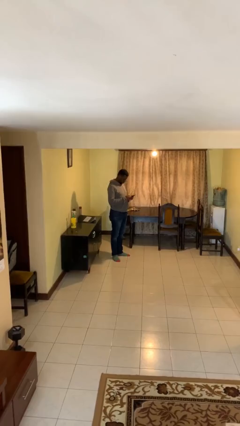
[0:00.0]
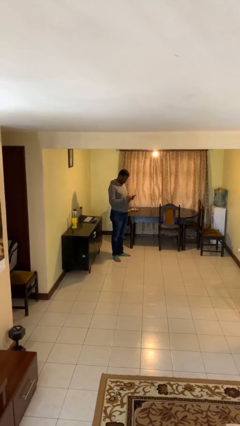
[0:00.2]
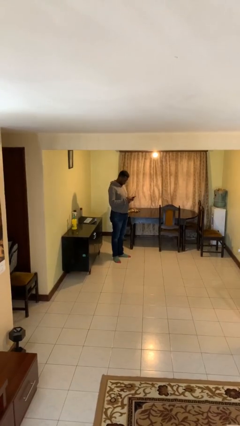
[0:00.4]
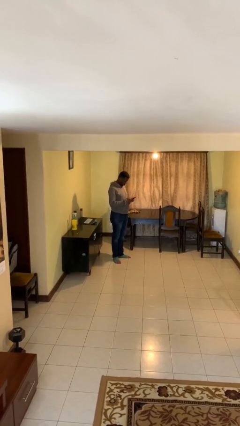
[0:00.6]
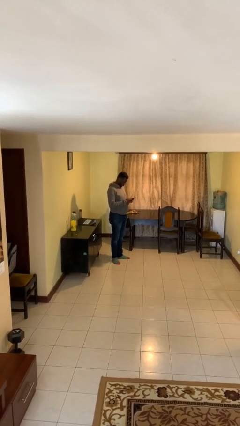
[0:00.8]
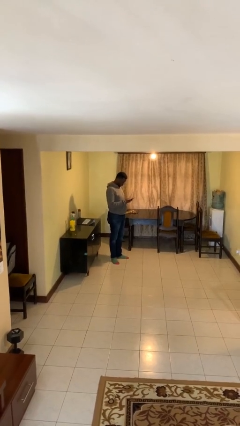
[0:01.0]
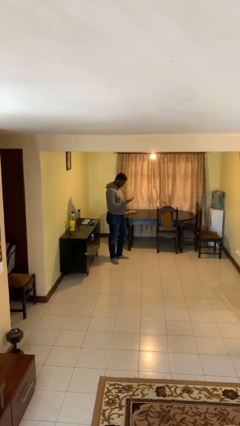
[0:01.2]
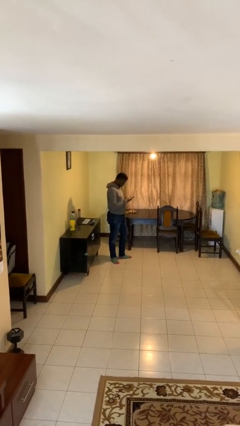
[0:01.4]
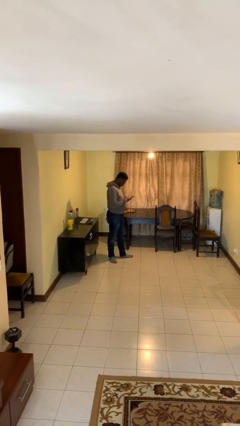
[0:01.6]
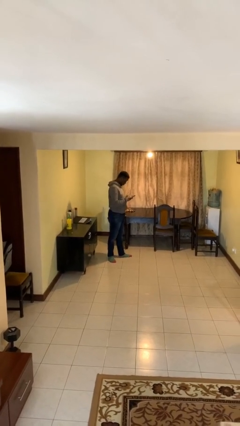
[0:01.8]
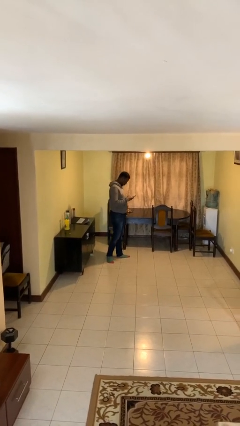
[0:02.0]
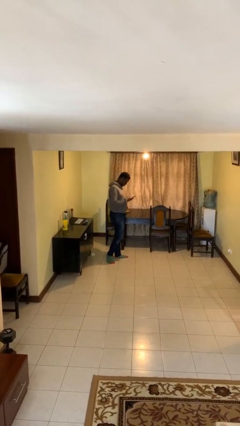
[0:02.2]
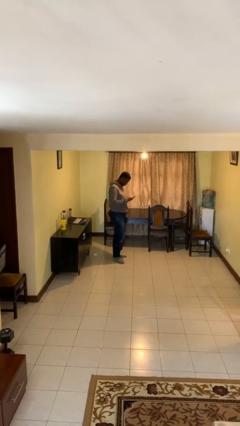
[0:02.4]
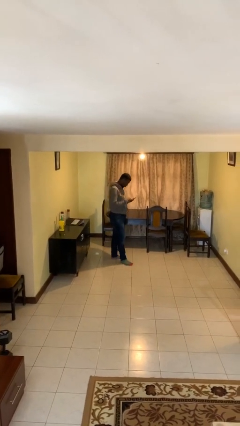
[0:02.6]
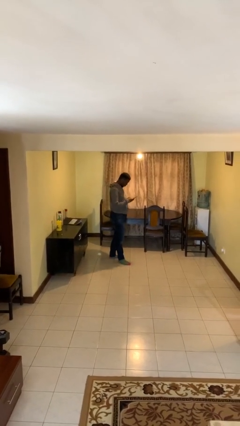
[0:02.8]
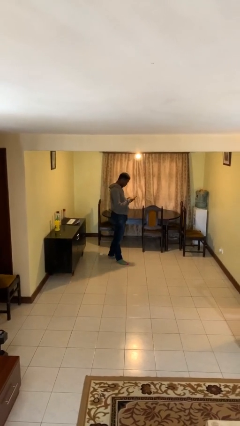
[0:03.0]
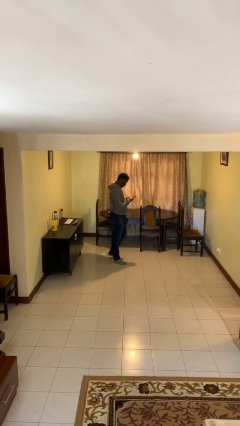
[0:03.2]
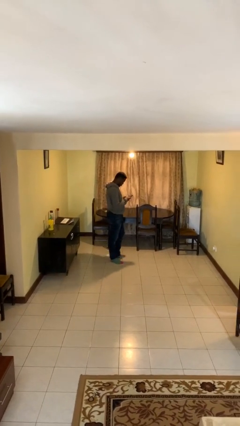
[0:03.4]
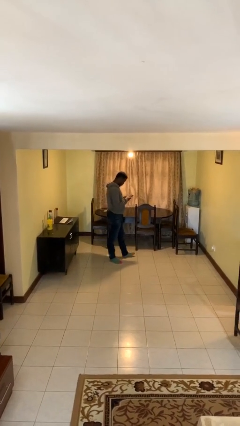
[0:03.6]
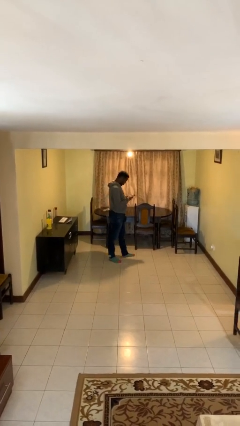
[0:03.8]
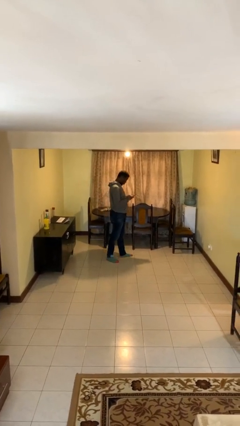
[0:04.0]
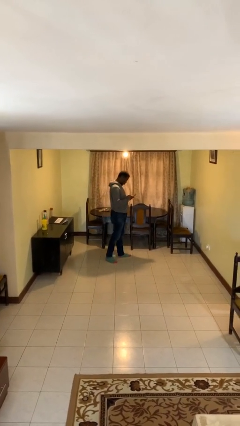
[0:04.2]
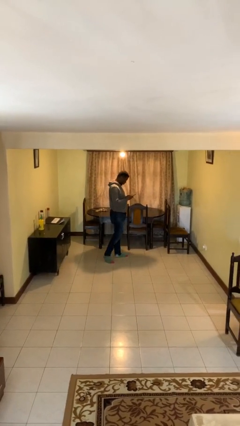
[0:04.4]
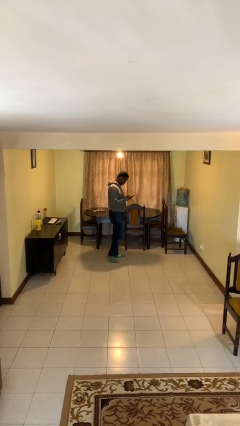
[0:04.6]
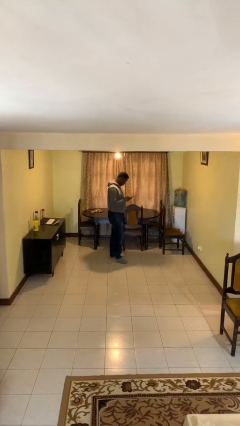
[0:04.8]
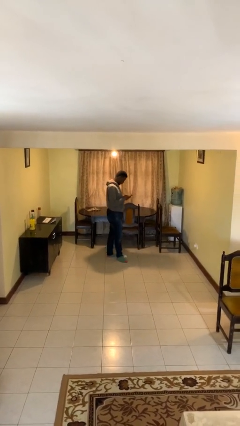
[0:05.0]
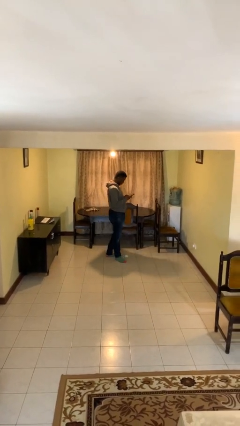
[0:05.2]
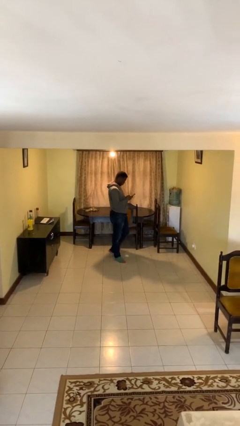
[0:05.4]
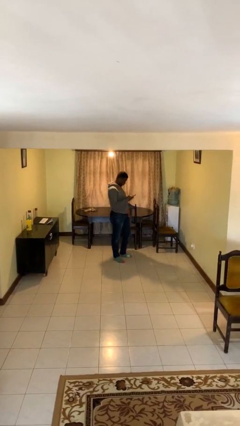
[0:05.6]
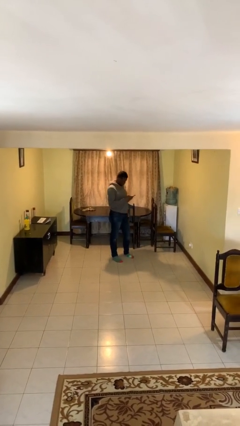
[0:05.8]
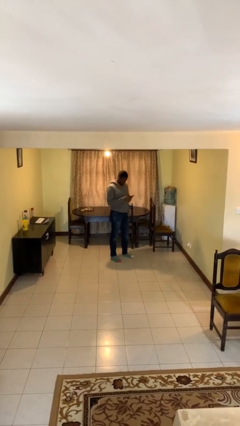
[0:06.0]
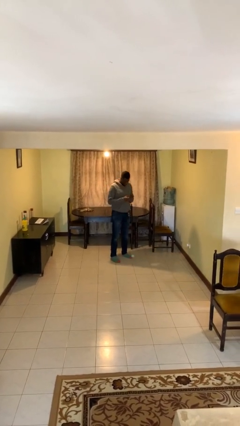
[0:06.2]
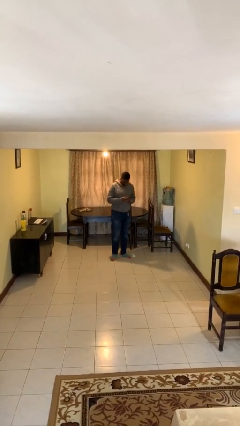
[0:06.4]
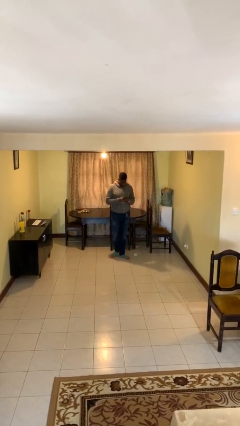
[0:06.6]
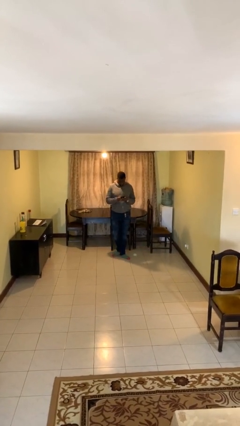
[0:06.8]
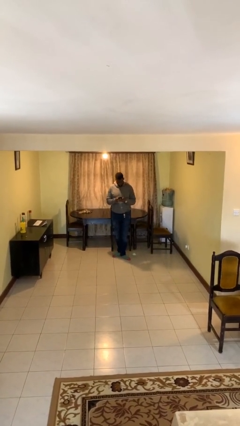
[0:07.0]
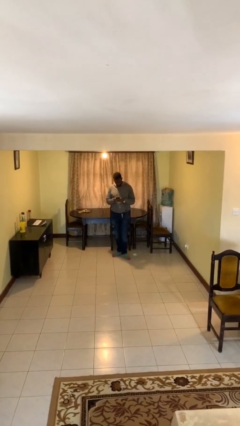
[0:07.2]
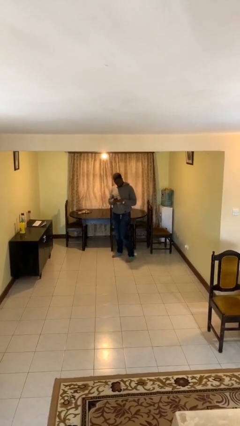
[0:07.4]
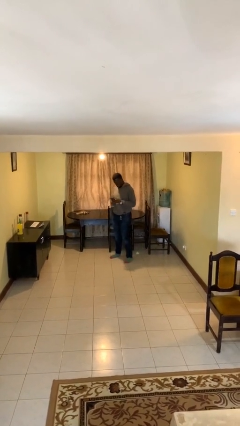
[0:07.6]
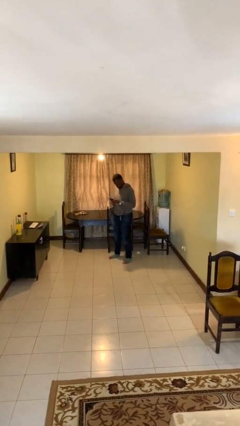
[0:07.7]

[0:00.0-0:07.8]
person texts on phone

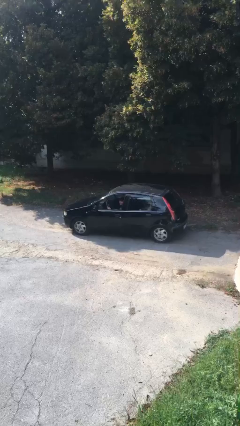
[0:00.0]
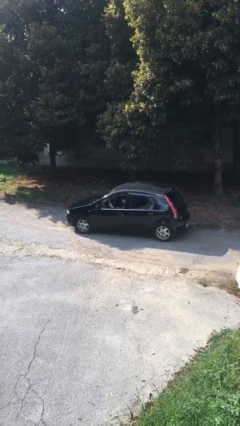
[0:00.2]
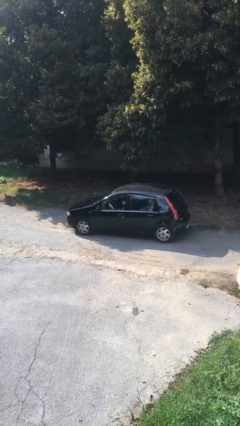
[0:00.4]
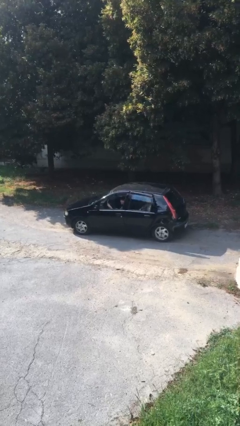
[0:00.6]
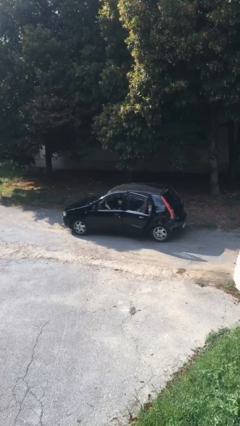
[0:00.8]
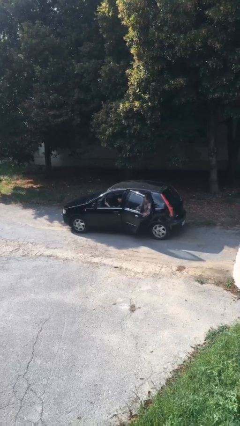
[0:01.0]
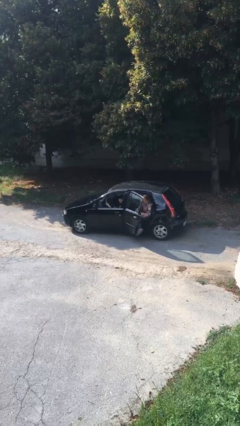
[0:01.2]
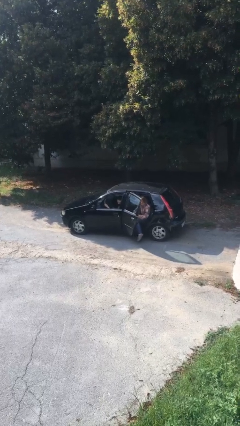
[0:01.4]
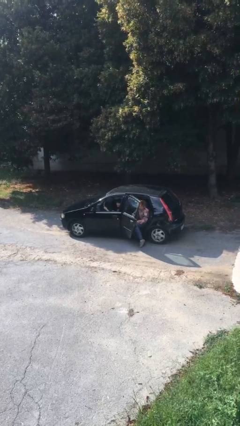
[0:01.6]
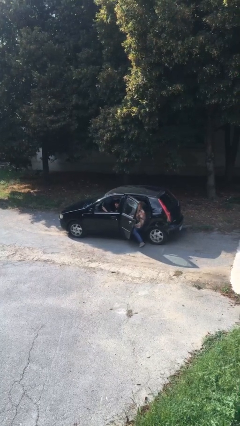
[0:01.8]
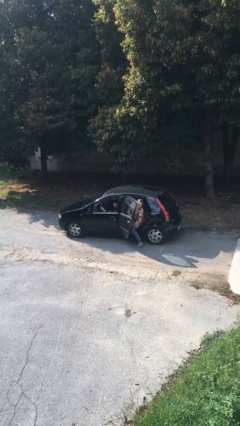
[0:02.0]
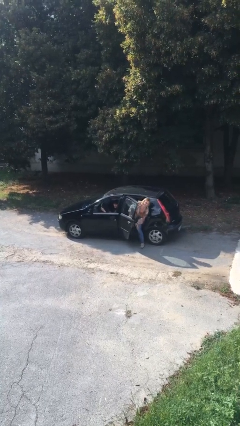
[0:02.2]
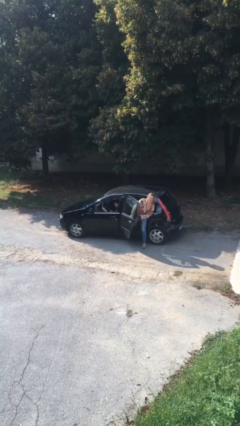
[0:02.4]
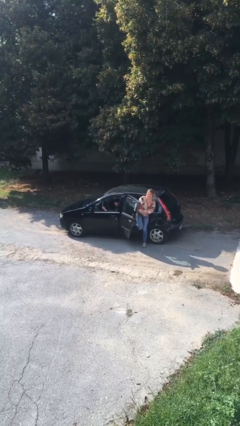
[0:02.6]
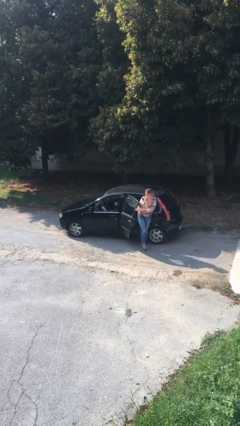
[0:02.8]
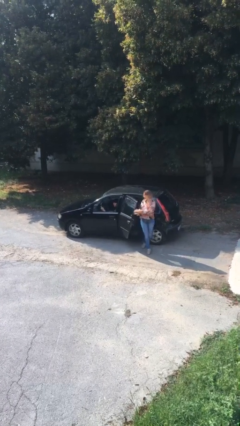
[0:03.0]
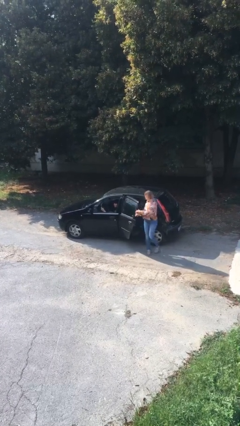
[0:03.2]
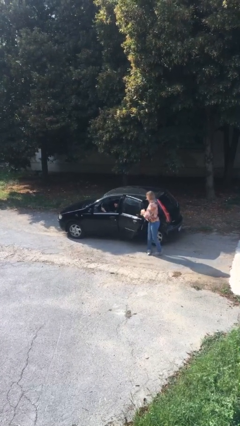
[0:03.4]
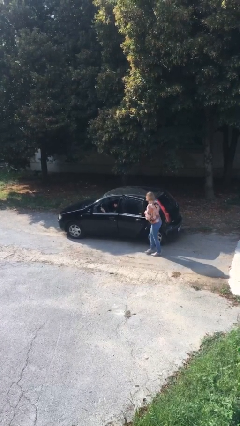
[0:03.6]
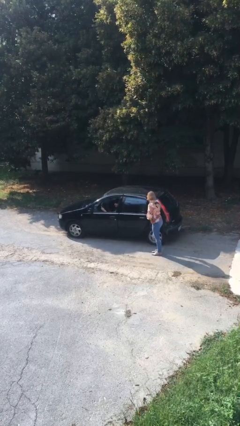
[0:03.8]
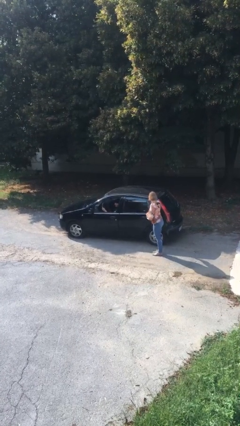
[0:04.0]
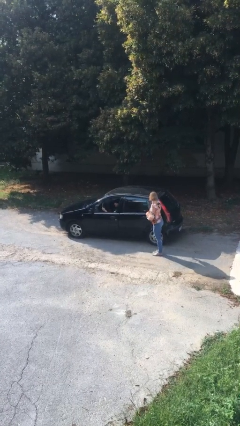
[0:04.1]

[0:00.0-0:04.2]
car drops off person

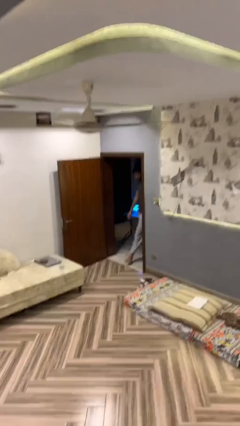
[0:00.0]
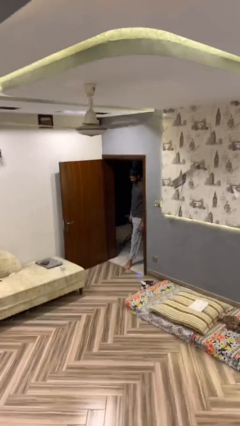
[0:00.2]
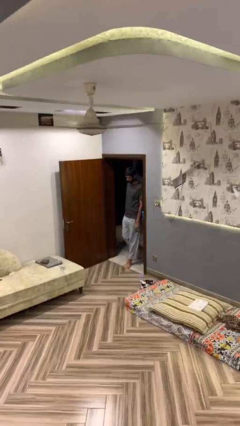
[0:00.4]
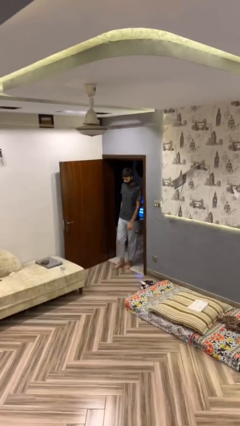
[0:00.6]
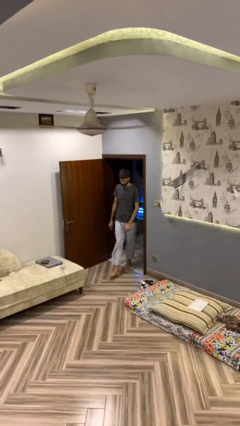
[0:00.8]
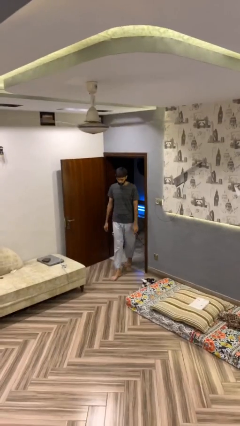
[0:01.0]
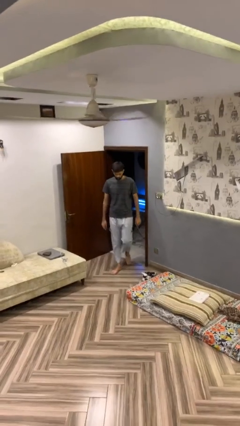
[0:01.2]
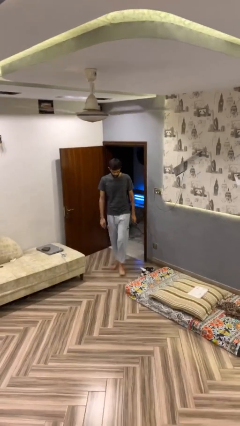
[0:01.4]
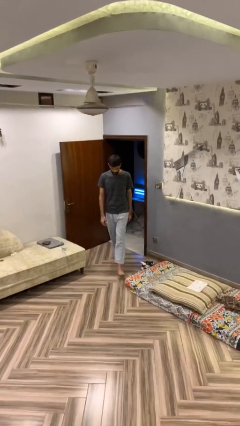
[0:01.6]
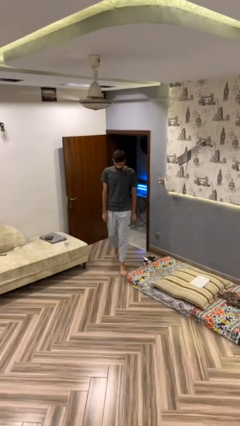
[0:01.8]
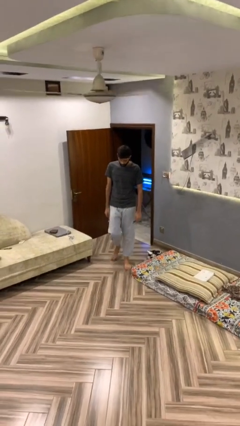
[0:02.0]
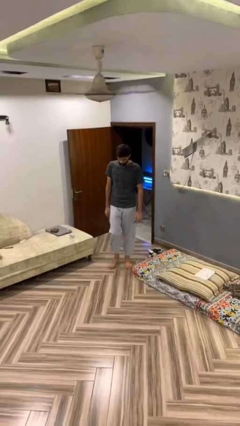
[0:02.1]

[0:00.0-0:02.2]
person enters scene through structure

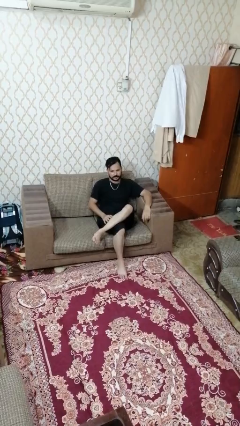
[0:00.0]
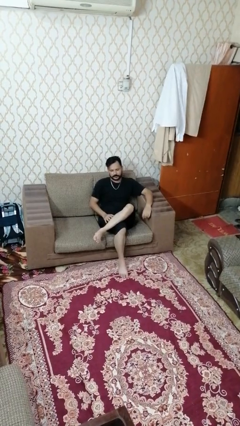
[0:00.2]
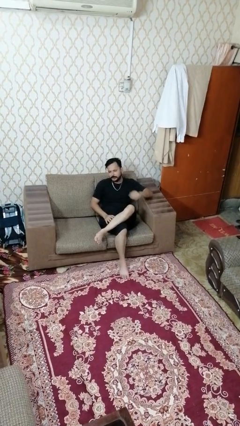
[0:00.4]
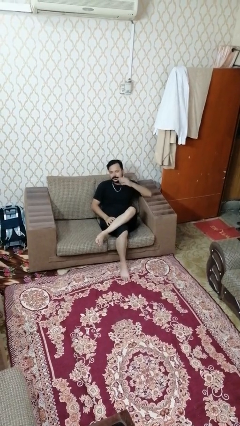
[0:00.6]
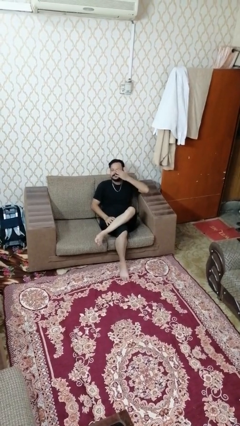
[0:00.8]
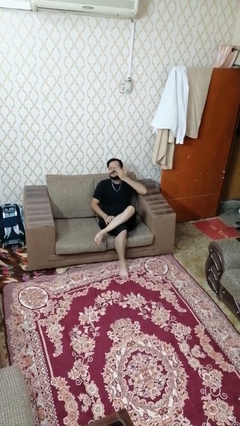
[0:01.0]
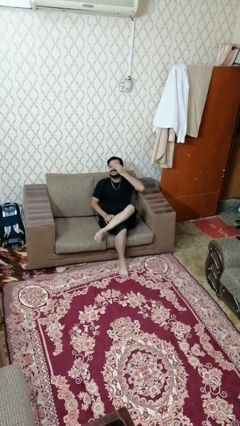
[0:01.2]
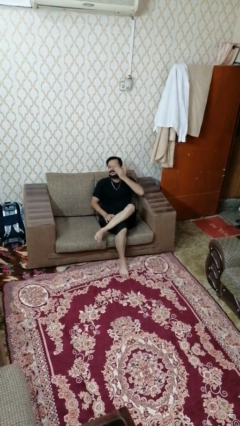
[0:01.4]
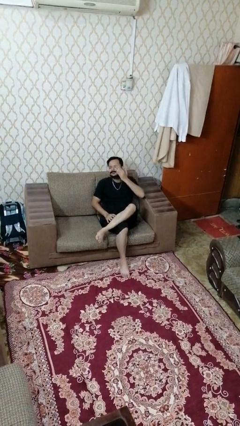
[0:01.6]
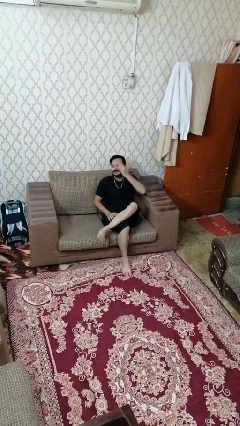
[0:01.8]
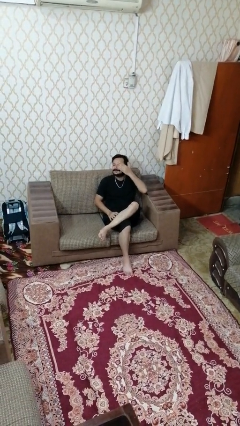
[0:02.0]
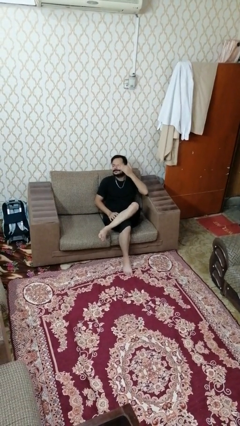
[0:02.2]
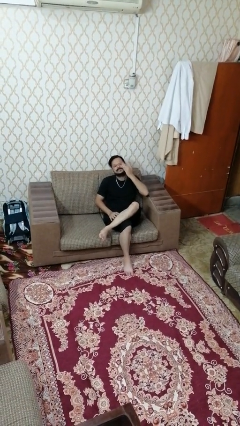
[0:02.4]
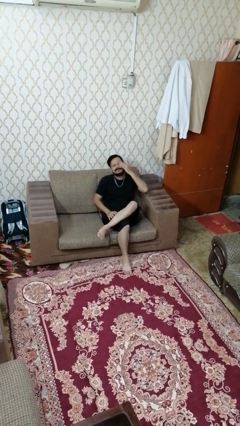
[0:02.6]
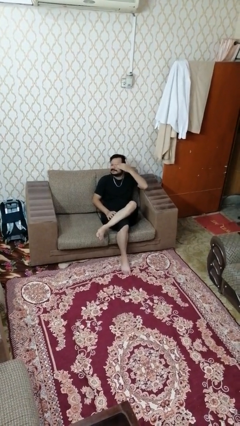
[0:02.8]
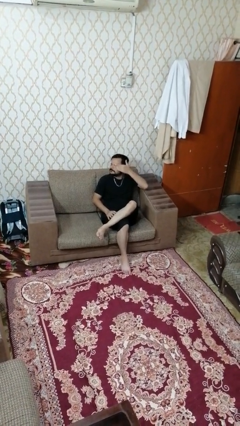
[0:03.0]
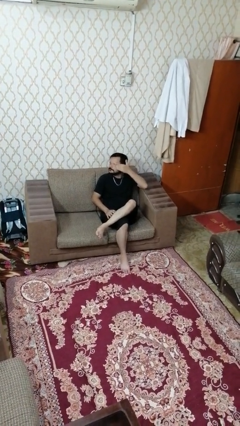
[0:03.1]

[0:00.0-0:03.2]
person rubs eyes

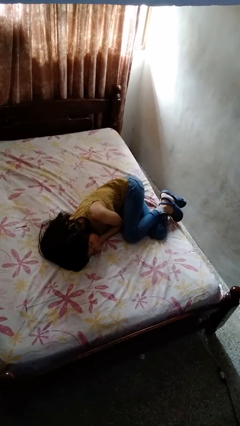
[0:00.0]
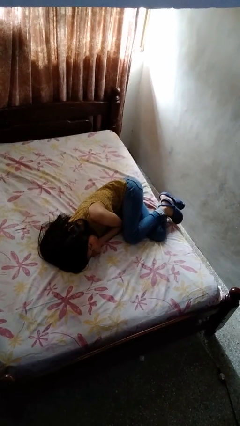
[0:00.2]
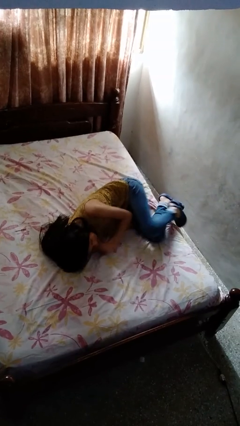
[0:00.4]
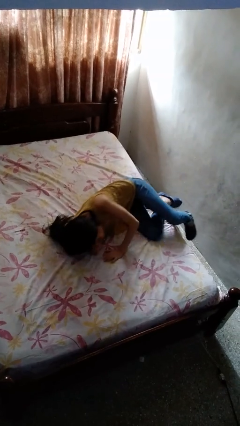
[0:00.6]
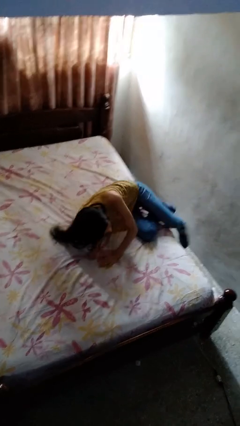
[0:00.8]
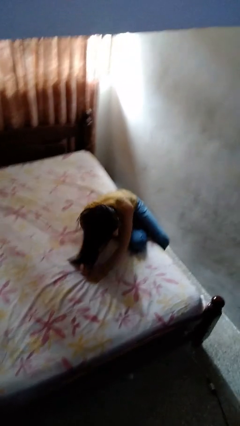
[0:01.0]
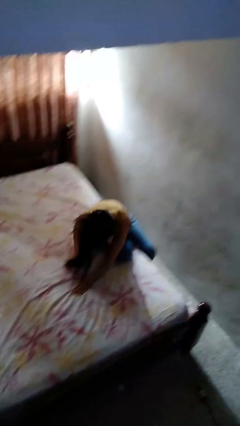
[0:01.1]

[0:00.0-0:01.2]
person stands up
